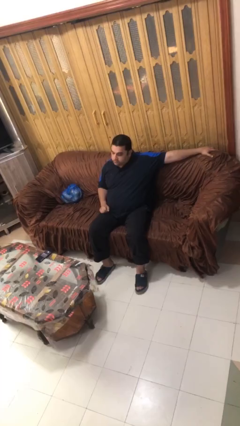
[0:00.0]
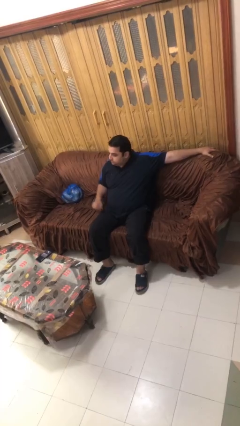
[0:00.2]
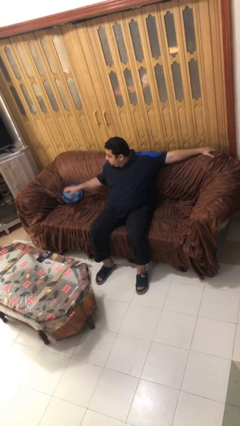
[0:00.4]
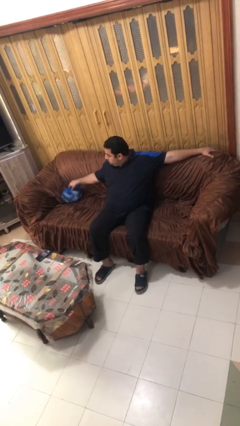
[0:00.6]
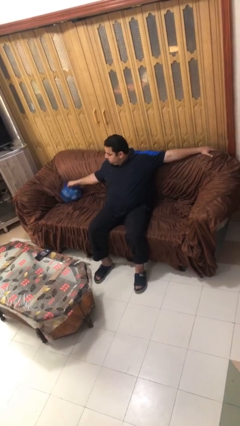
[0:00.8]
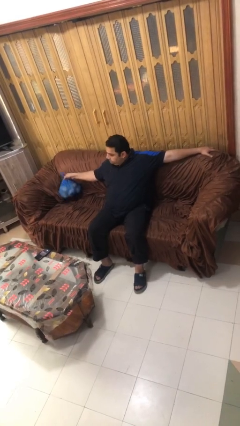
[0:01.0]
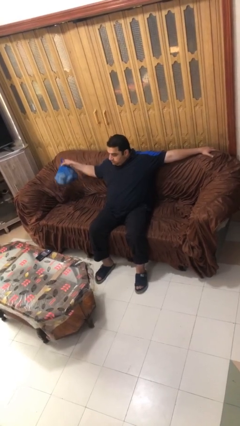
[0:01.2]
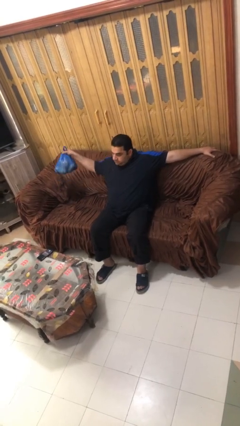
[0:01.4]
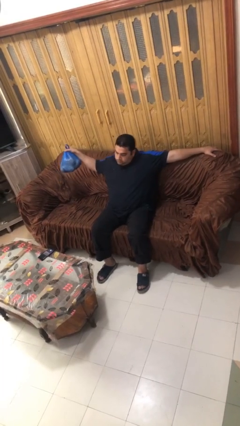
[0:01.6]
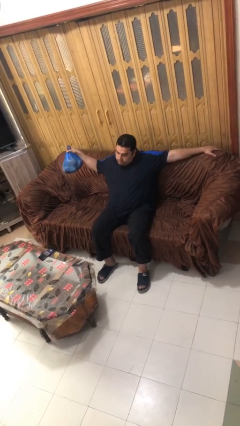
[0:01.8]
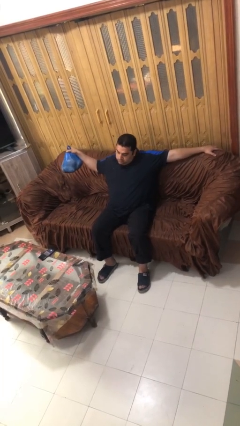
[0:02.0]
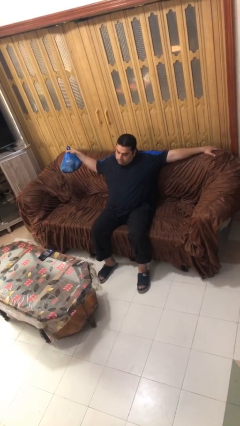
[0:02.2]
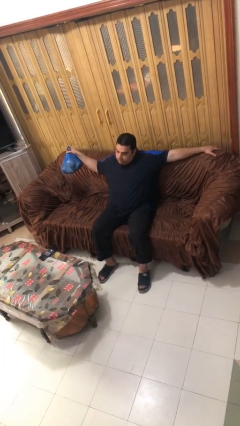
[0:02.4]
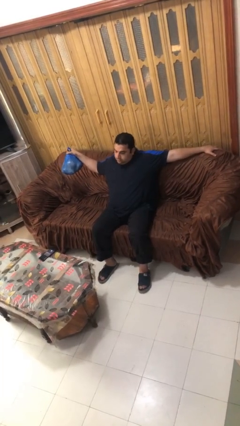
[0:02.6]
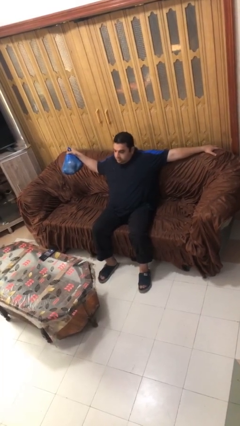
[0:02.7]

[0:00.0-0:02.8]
person picks up object from couch

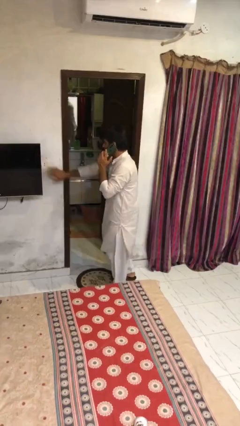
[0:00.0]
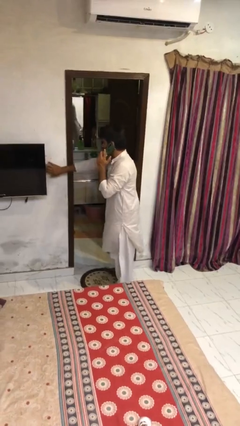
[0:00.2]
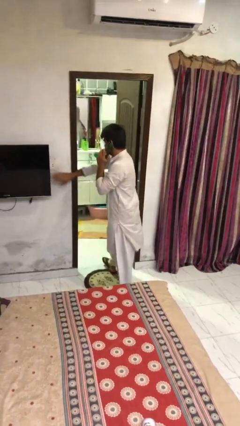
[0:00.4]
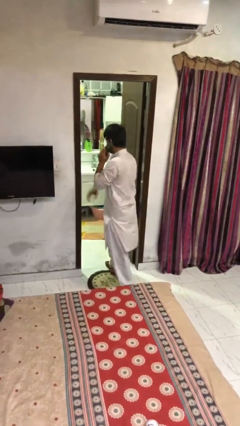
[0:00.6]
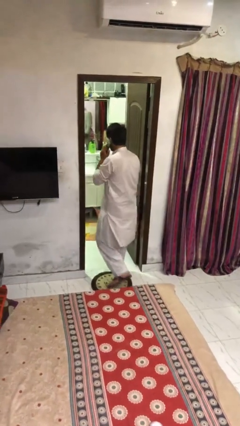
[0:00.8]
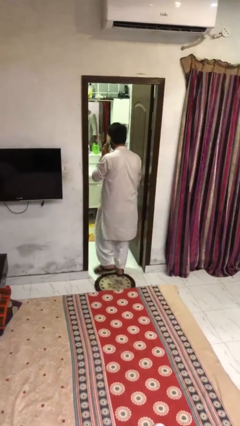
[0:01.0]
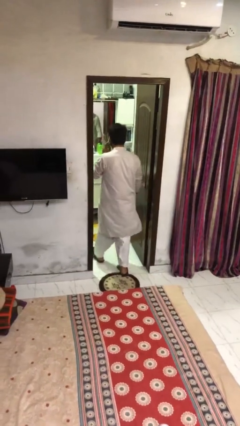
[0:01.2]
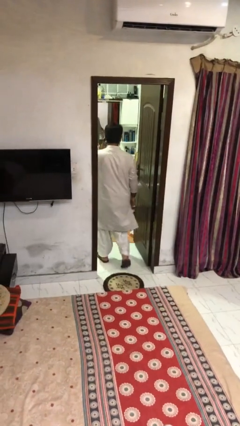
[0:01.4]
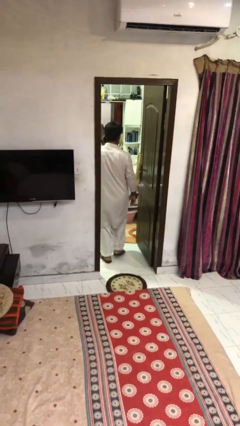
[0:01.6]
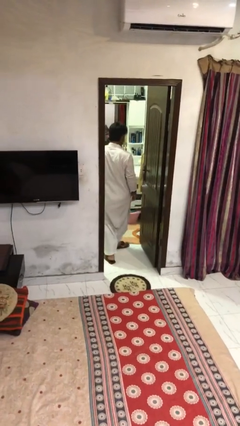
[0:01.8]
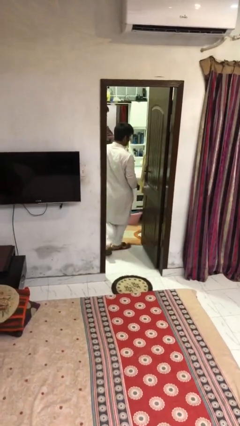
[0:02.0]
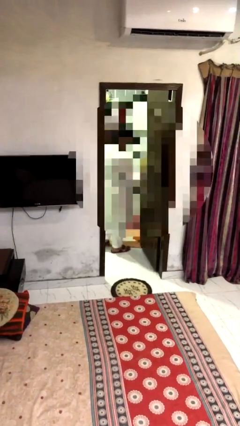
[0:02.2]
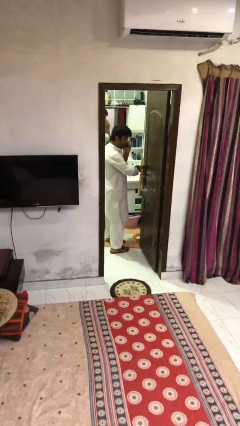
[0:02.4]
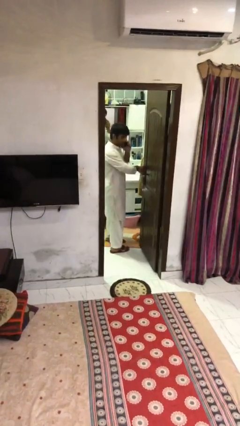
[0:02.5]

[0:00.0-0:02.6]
person exits scene through structure

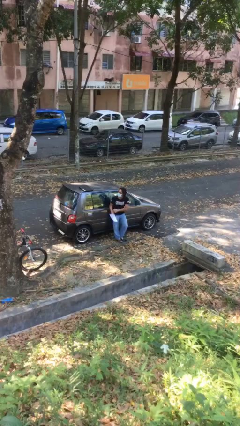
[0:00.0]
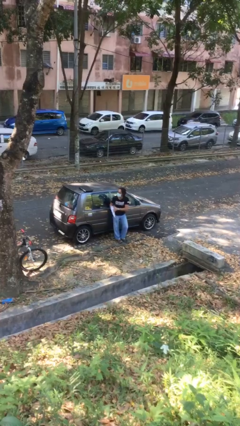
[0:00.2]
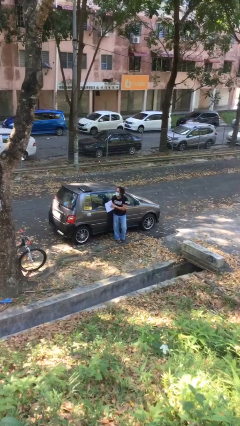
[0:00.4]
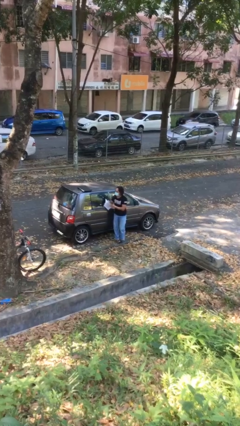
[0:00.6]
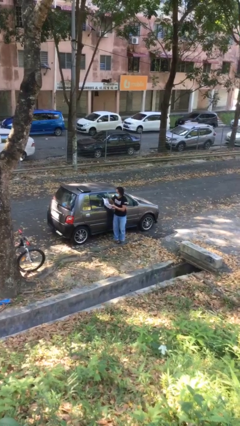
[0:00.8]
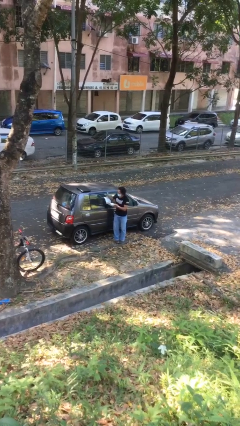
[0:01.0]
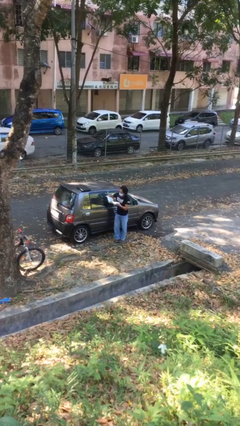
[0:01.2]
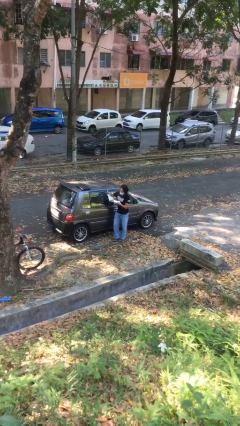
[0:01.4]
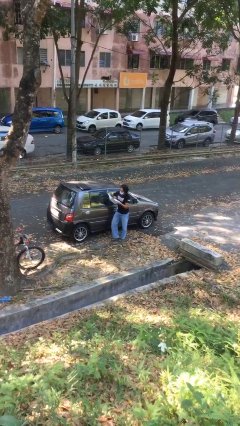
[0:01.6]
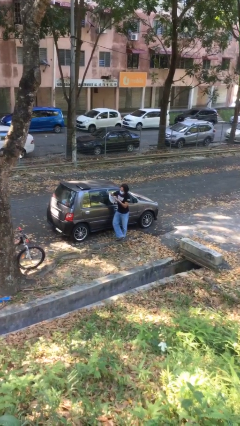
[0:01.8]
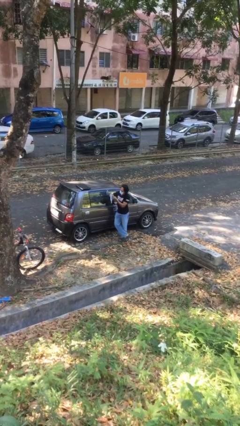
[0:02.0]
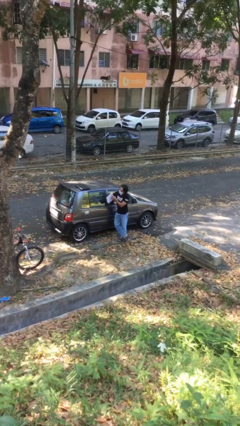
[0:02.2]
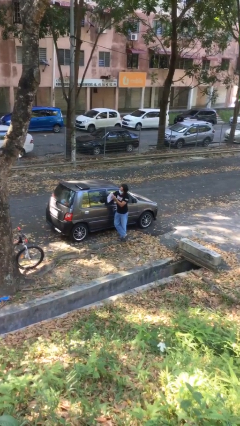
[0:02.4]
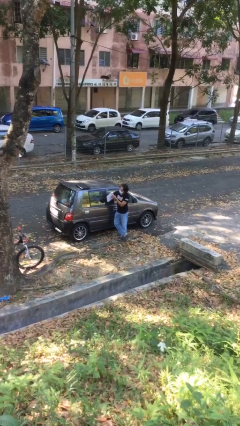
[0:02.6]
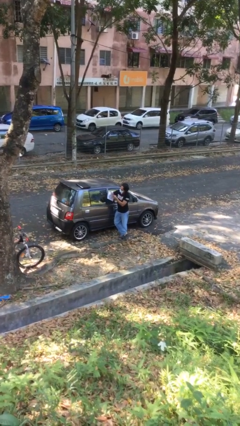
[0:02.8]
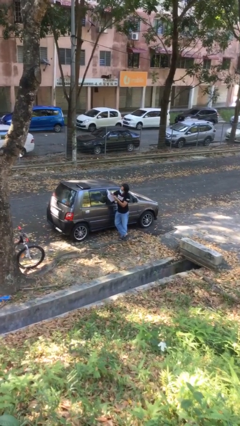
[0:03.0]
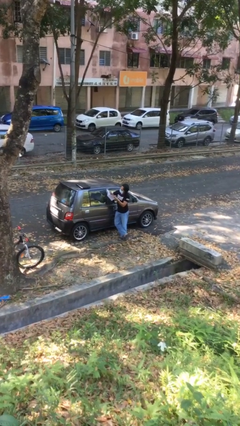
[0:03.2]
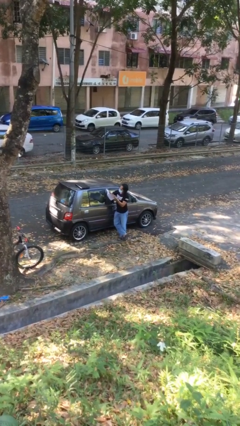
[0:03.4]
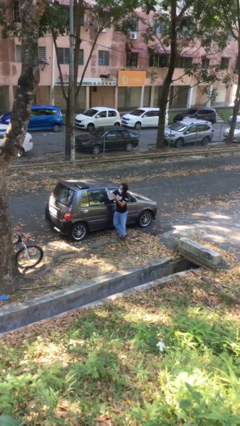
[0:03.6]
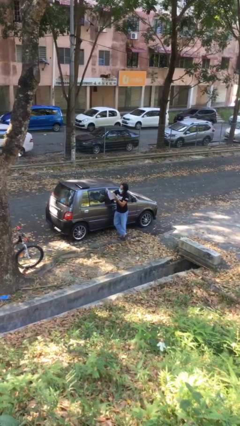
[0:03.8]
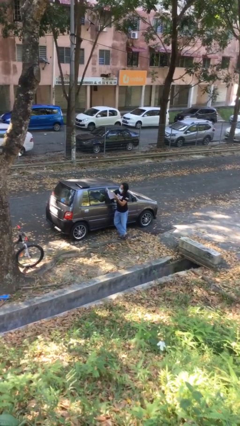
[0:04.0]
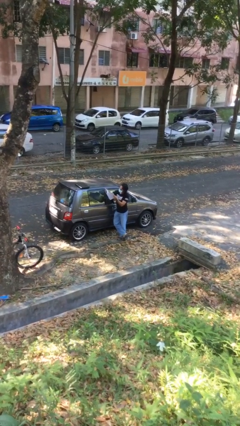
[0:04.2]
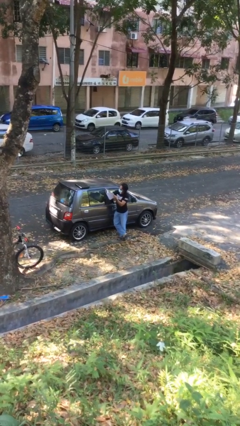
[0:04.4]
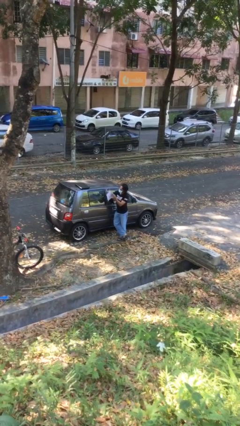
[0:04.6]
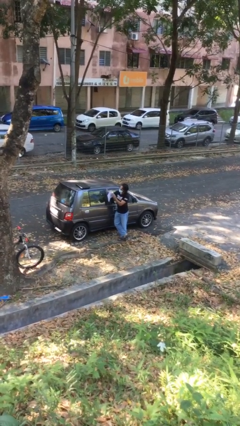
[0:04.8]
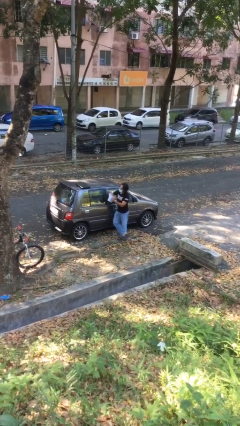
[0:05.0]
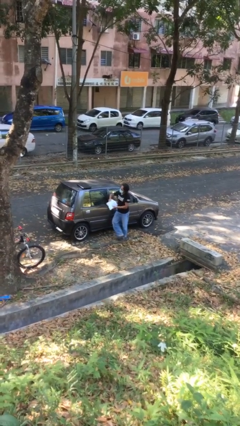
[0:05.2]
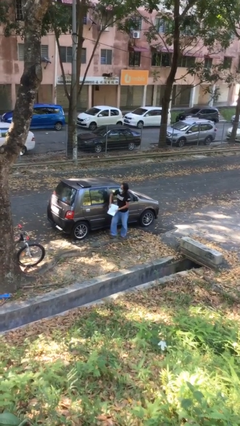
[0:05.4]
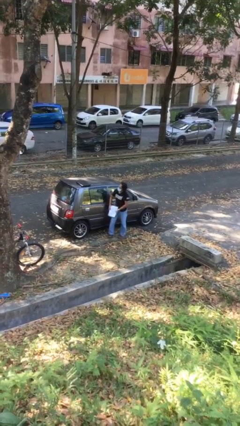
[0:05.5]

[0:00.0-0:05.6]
person reads document

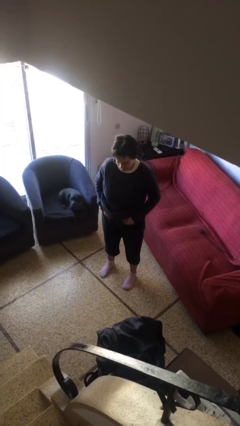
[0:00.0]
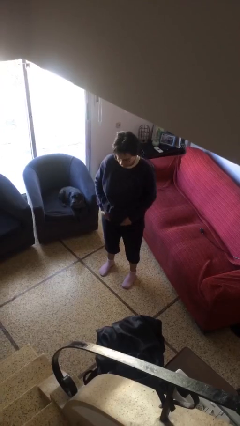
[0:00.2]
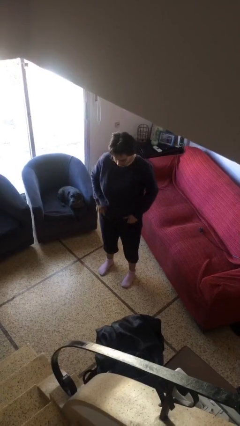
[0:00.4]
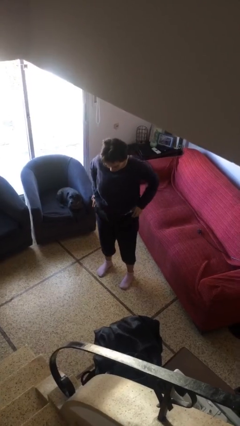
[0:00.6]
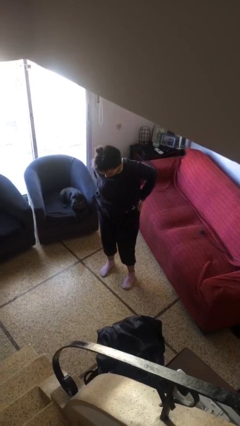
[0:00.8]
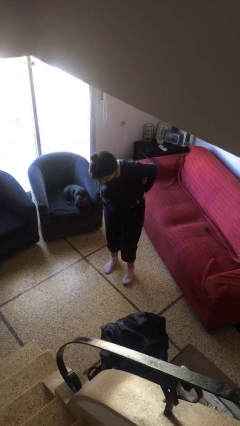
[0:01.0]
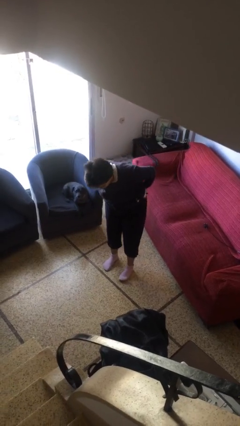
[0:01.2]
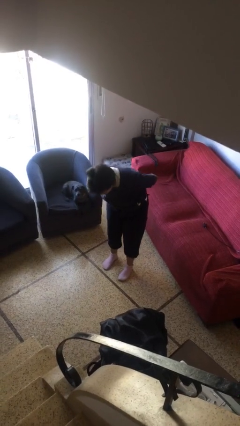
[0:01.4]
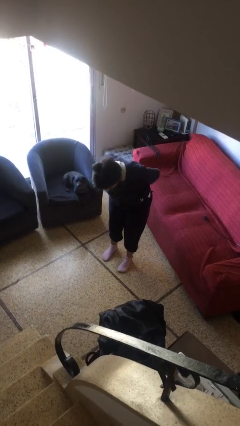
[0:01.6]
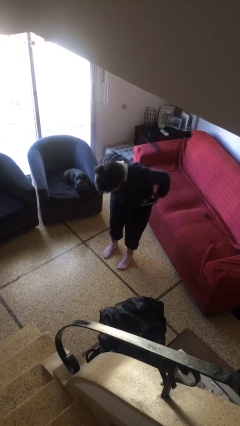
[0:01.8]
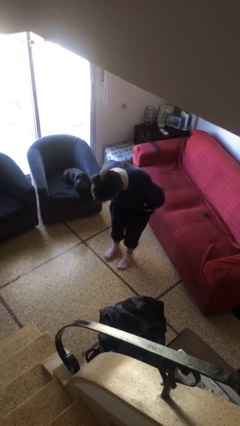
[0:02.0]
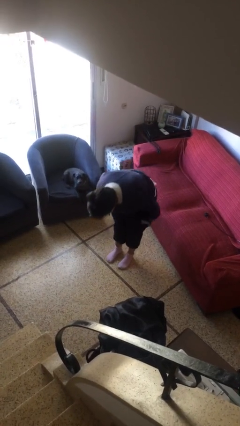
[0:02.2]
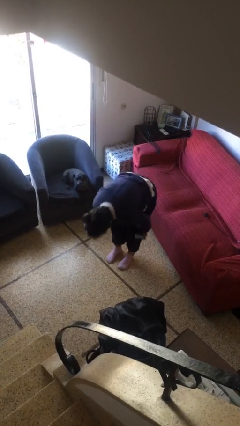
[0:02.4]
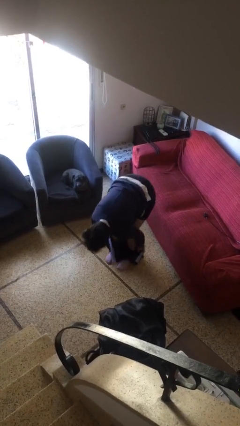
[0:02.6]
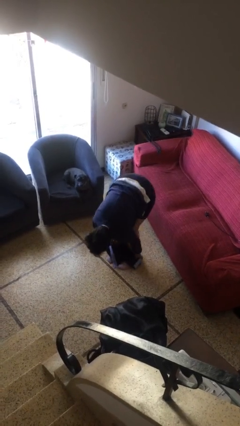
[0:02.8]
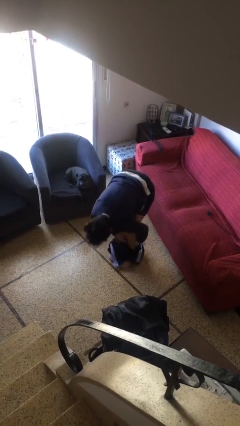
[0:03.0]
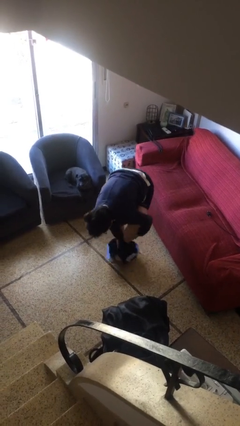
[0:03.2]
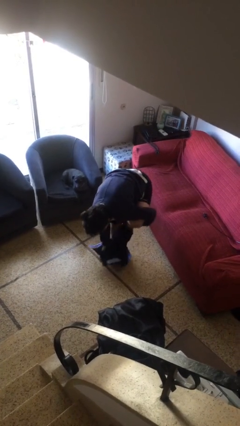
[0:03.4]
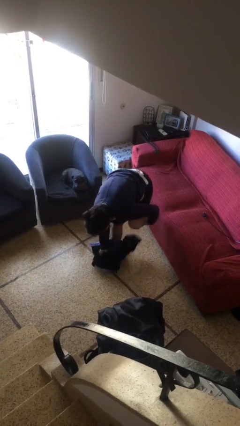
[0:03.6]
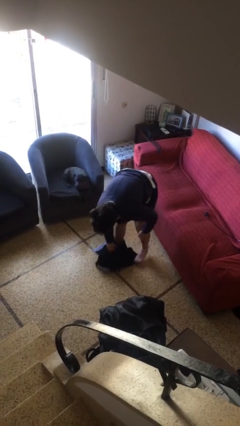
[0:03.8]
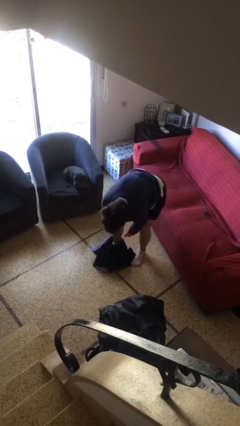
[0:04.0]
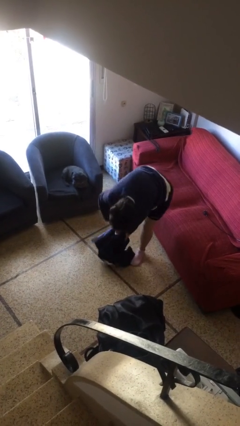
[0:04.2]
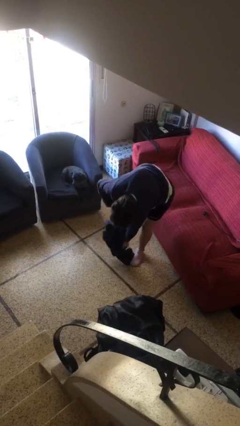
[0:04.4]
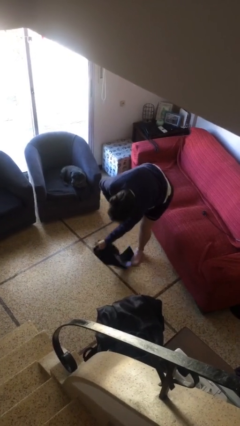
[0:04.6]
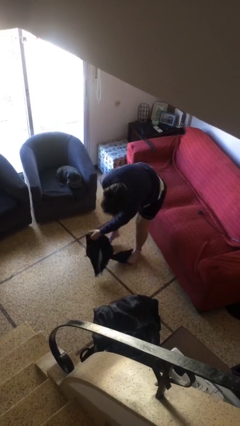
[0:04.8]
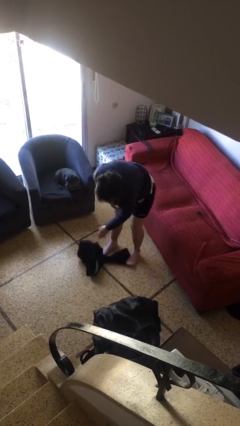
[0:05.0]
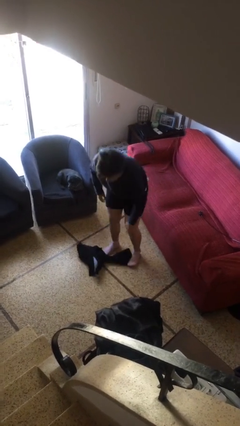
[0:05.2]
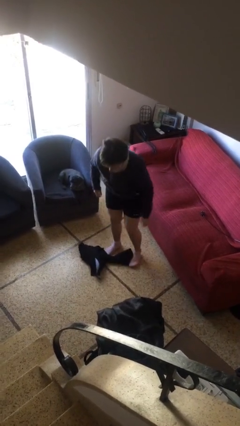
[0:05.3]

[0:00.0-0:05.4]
person takes off pants

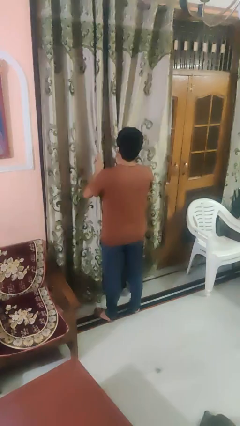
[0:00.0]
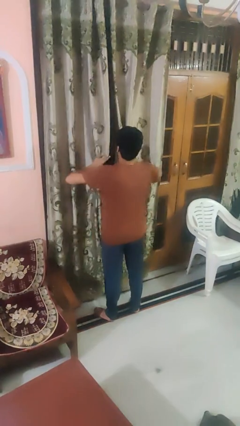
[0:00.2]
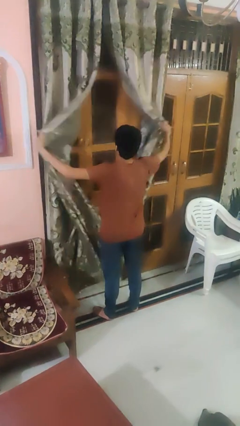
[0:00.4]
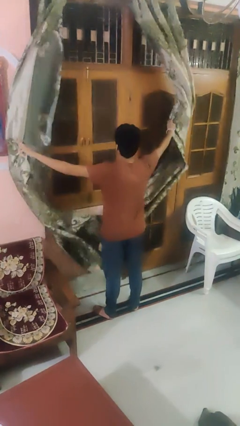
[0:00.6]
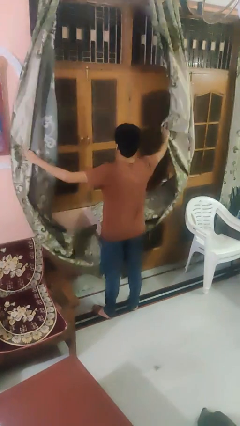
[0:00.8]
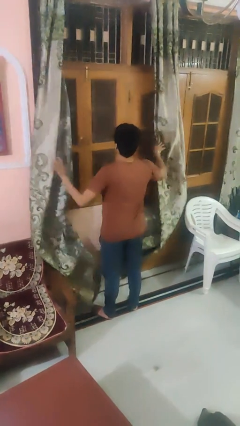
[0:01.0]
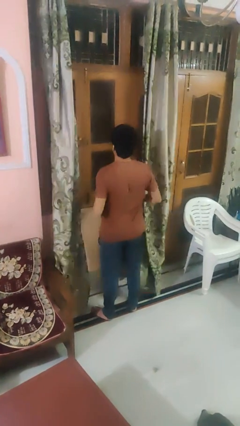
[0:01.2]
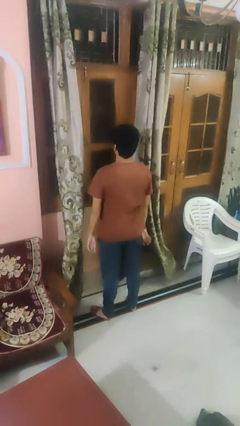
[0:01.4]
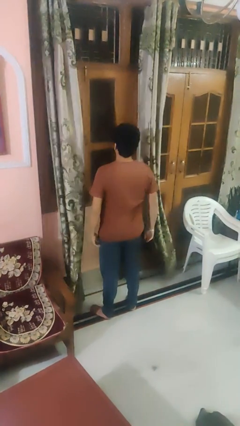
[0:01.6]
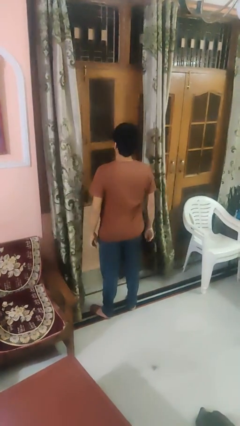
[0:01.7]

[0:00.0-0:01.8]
person opens curtains
